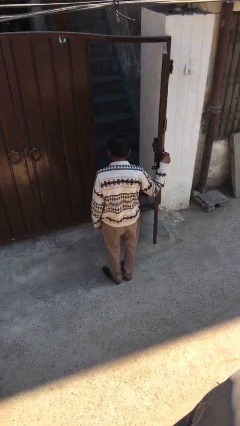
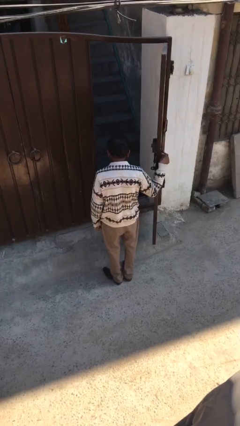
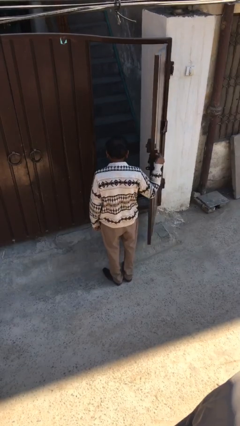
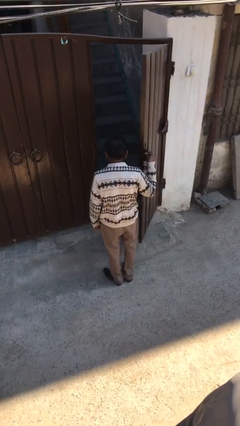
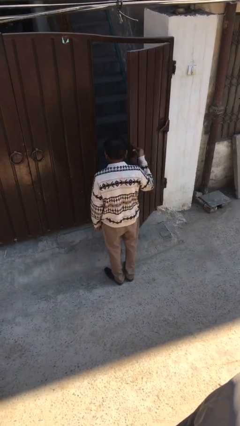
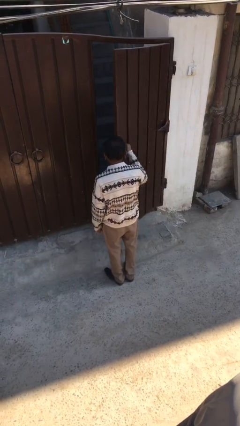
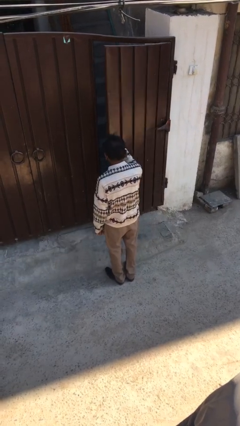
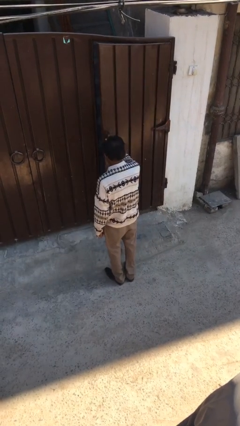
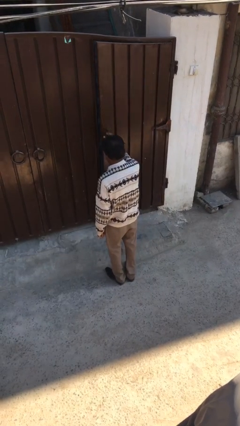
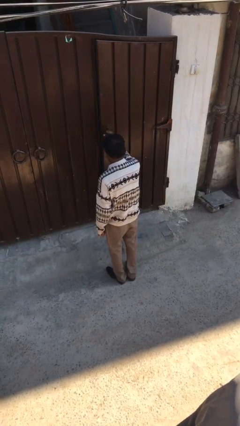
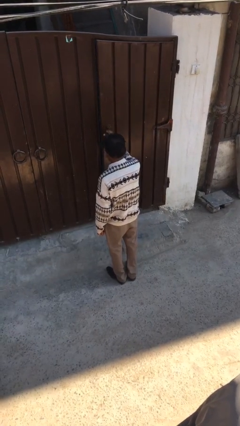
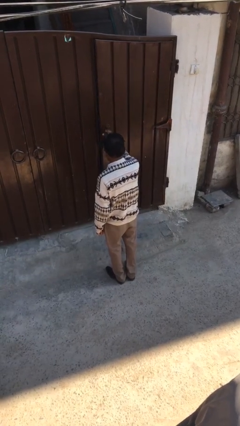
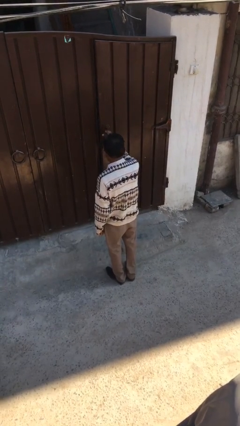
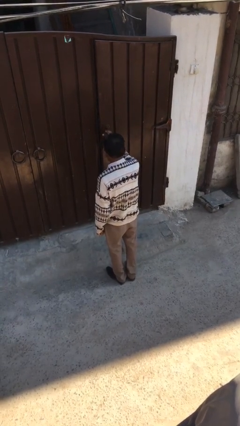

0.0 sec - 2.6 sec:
person closes facility door

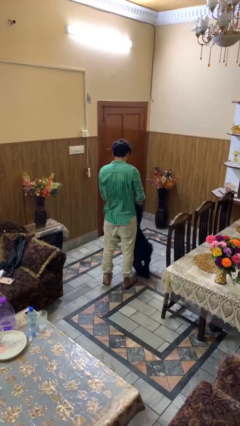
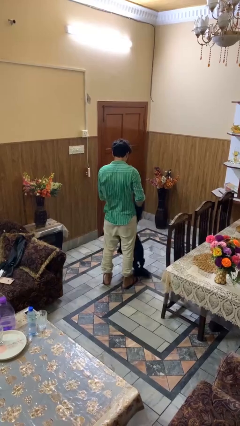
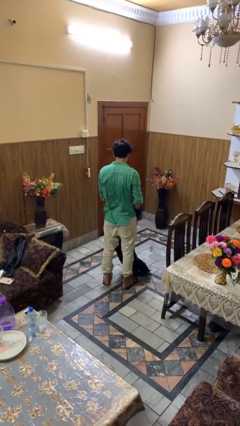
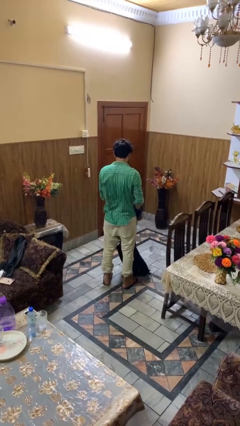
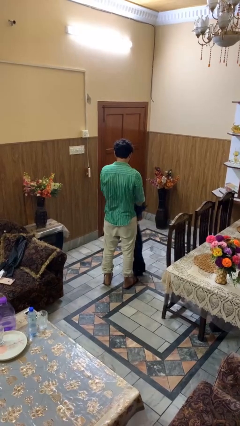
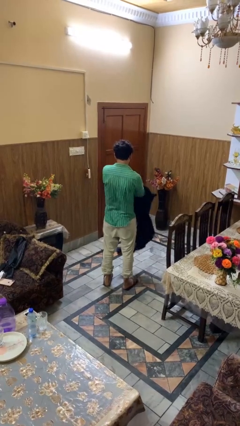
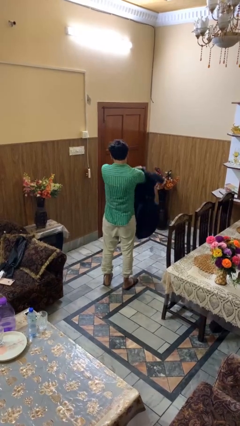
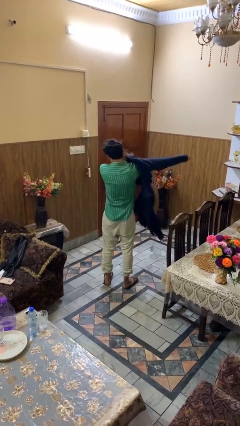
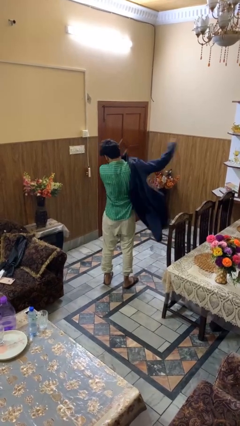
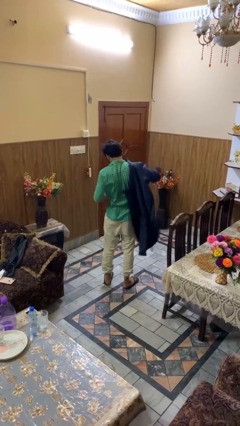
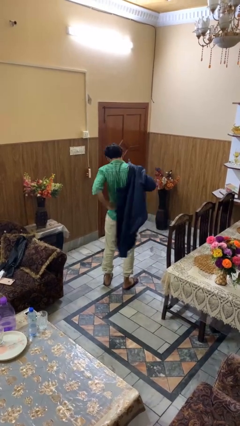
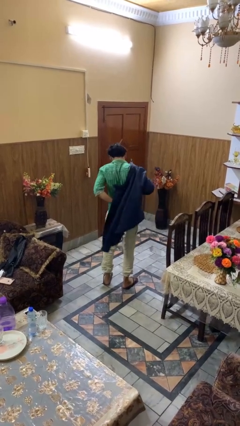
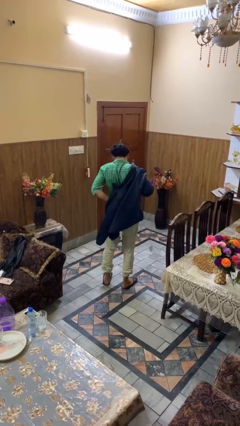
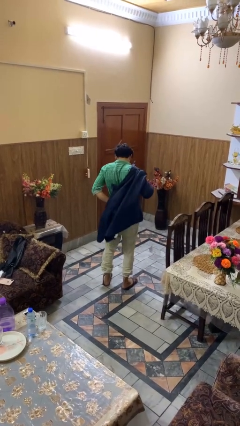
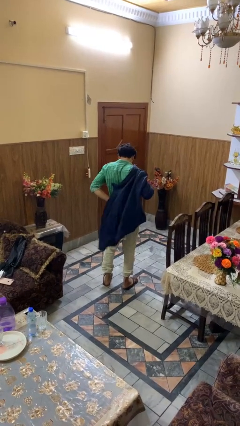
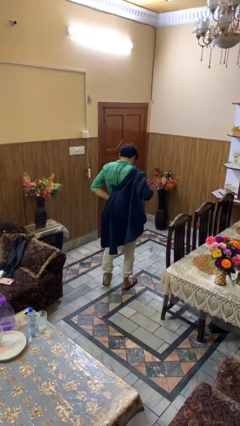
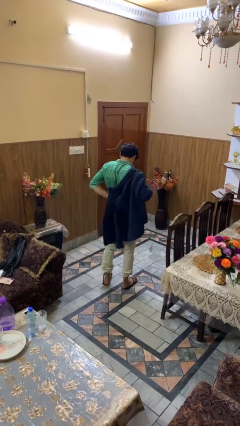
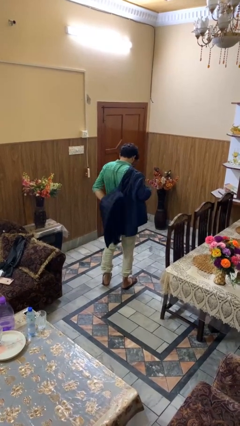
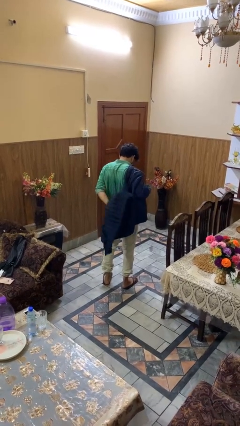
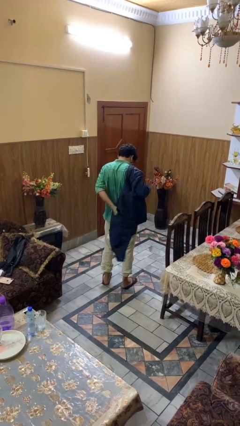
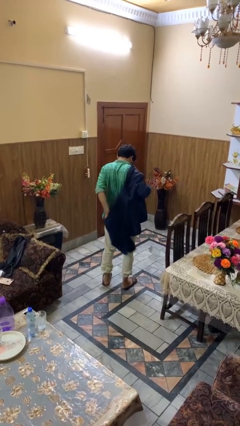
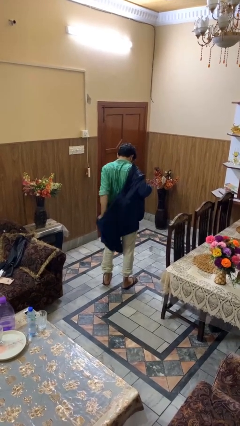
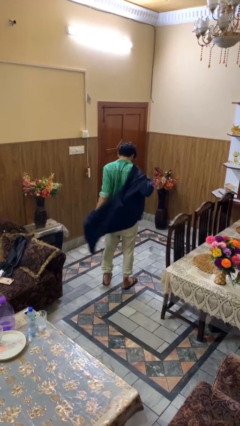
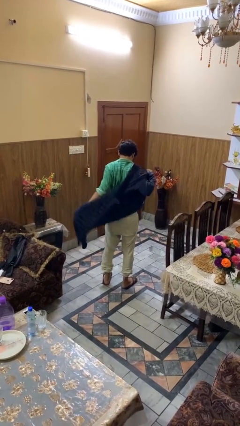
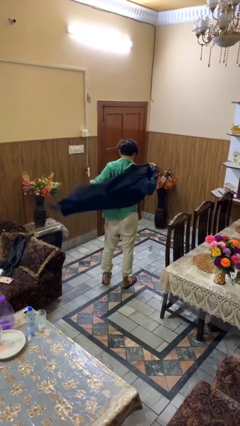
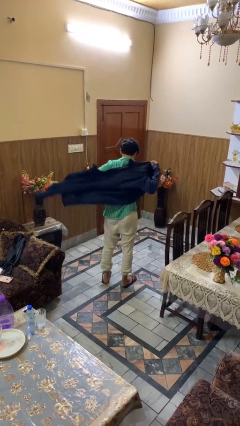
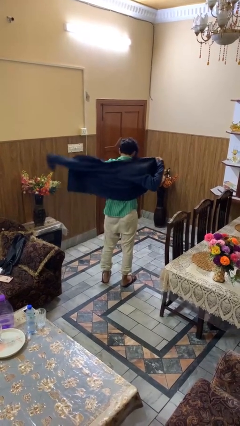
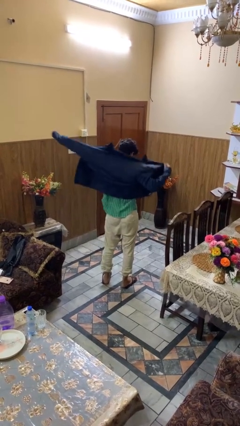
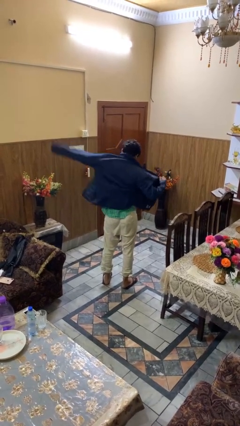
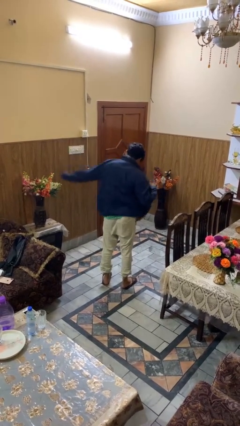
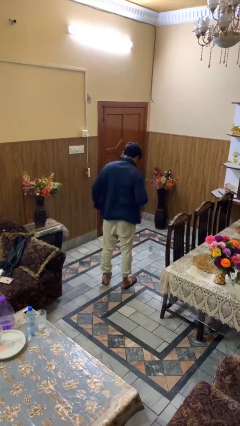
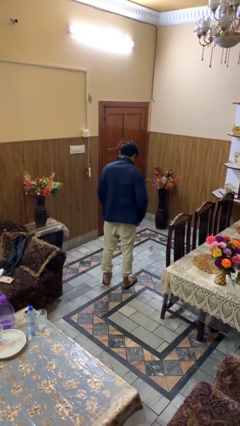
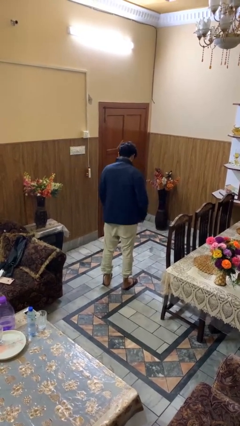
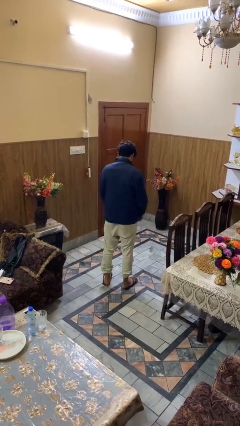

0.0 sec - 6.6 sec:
person puts on jacket

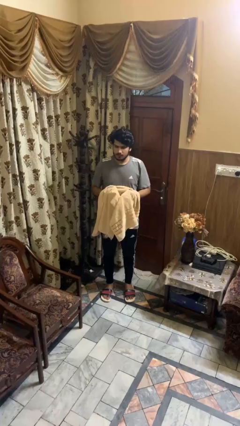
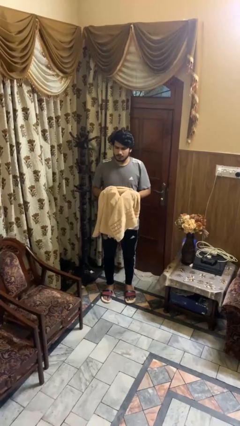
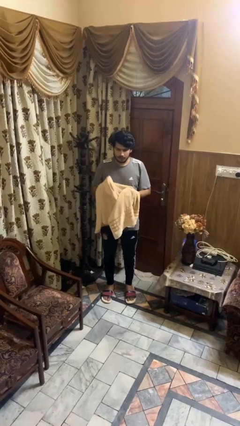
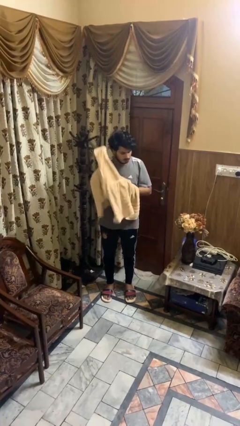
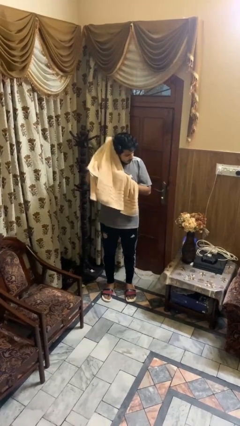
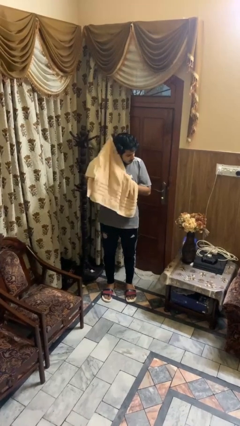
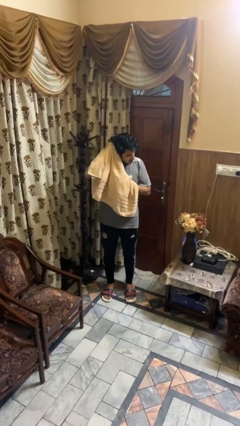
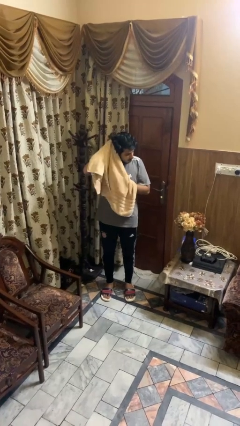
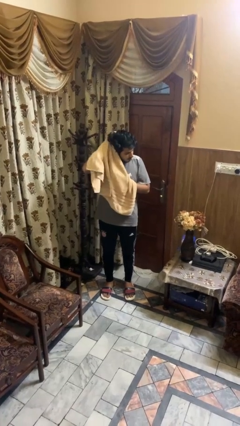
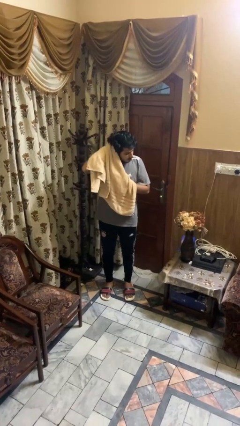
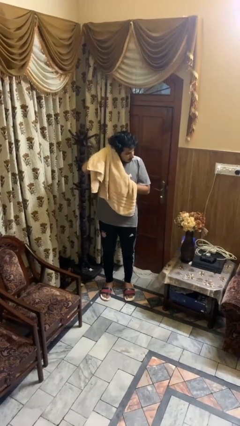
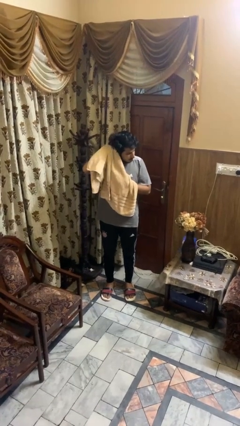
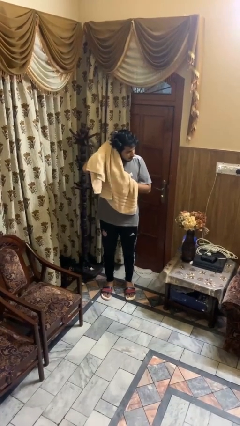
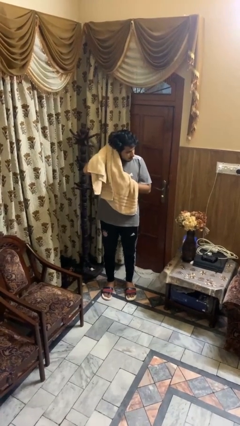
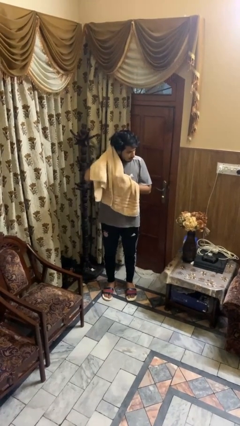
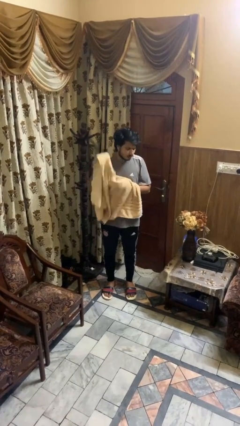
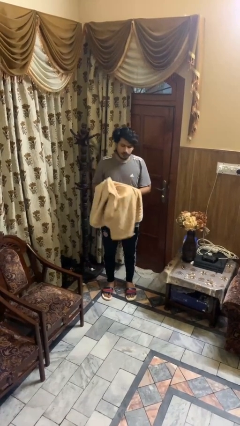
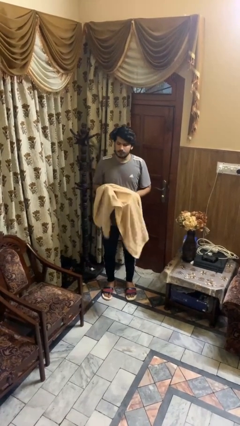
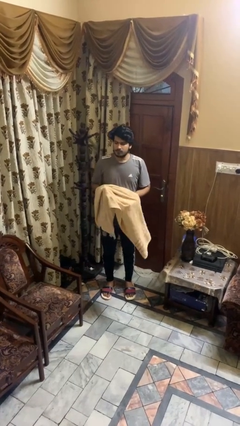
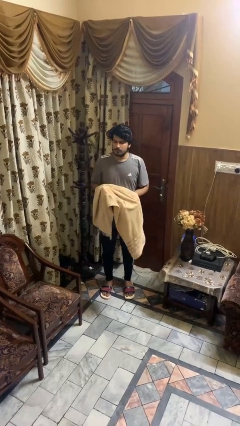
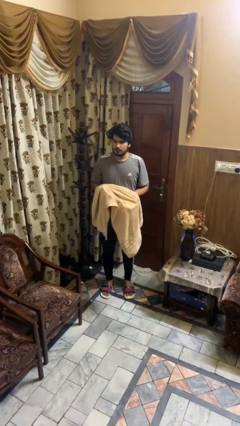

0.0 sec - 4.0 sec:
person dries hair with towel

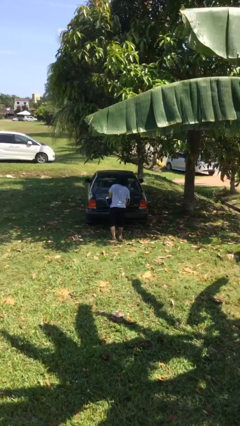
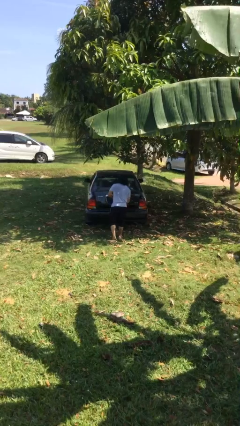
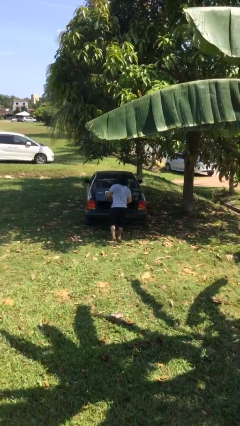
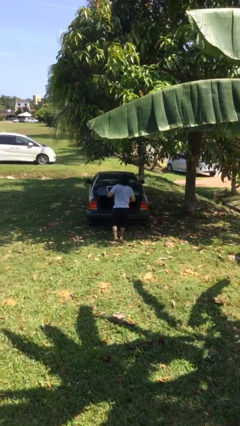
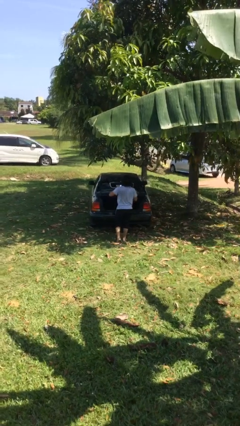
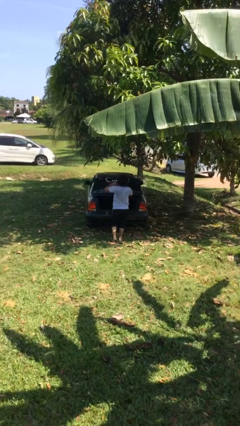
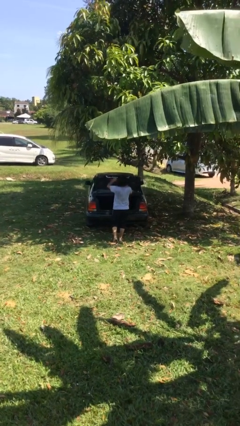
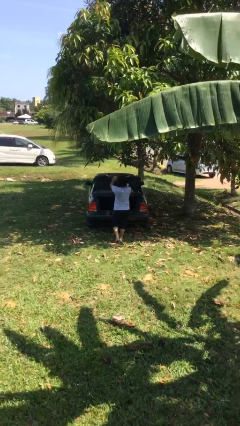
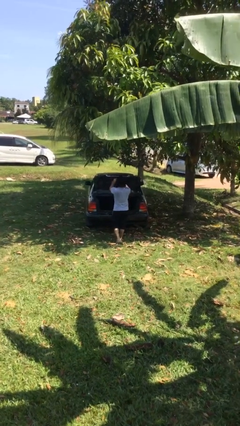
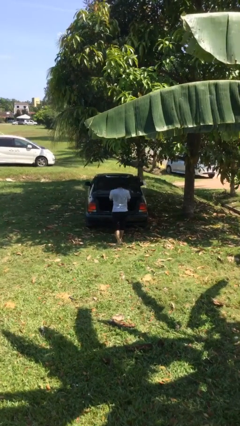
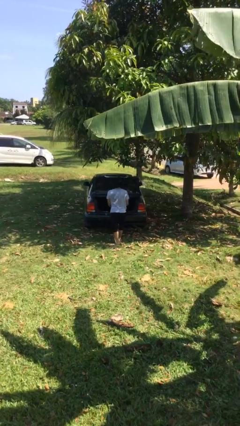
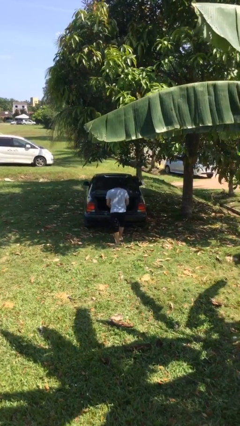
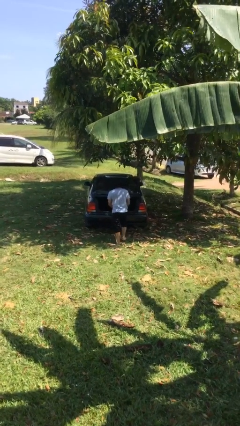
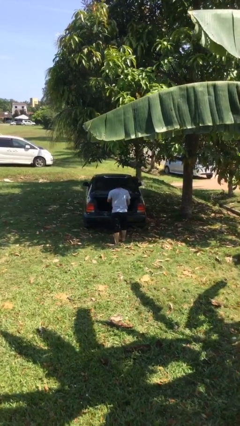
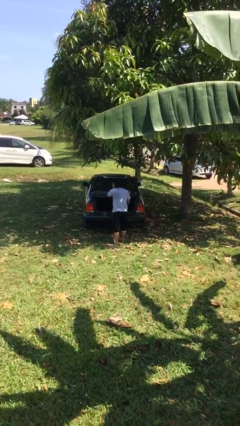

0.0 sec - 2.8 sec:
person opens car trunk

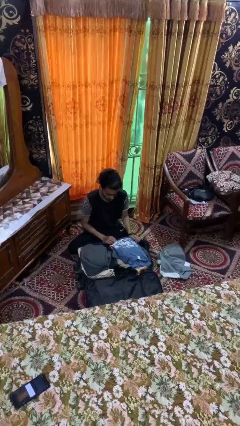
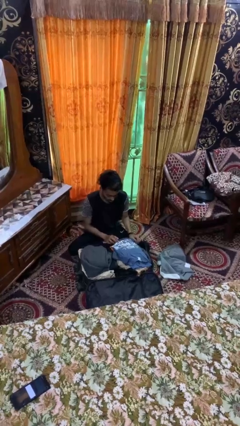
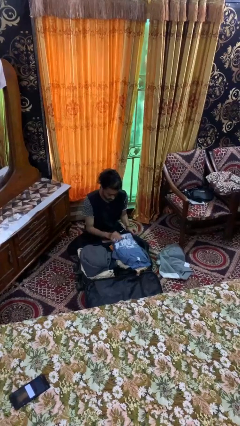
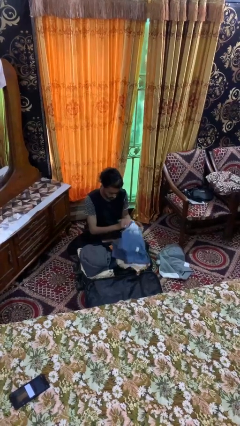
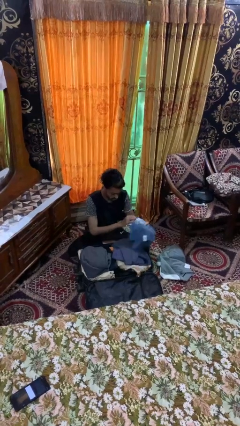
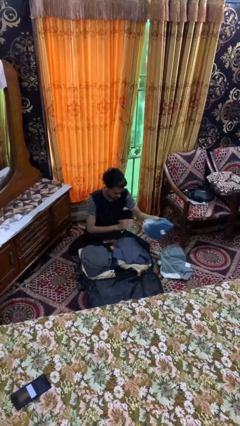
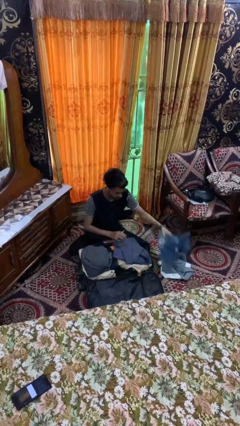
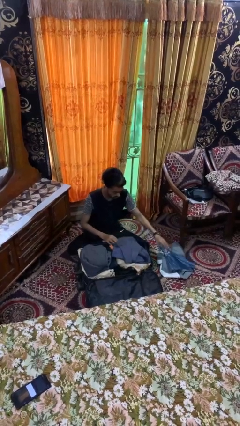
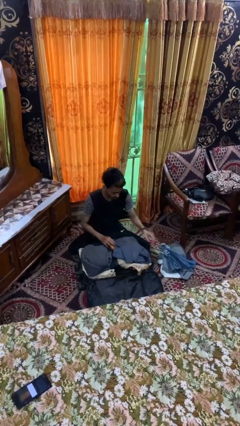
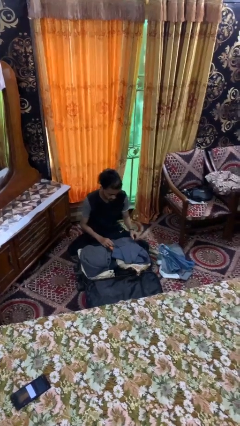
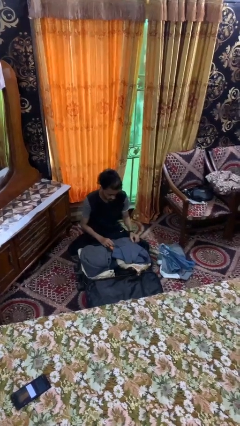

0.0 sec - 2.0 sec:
person unloads clothes from suitcase
